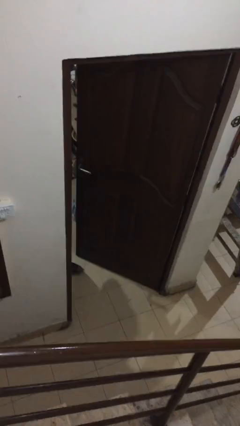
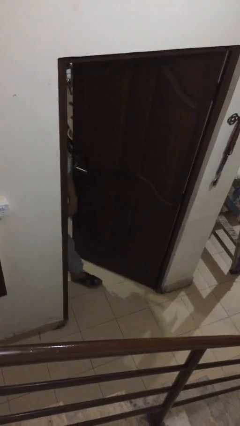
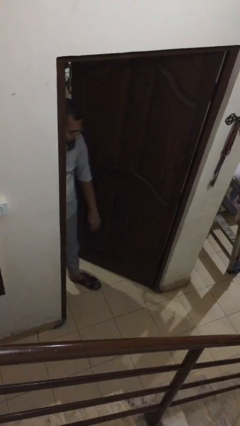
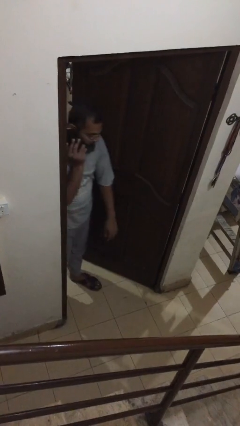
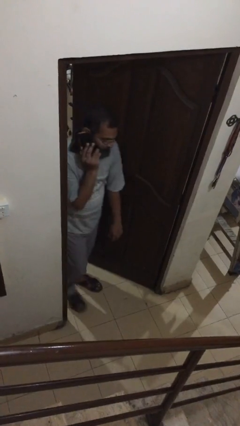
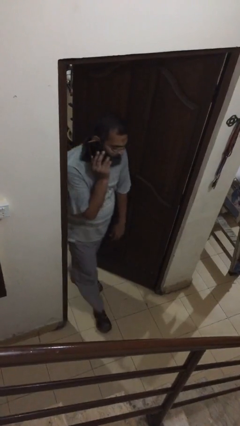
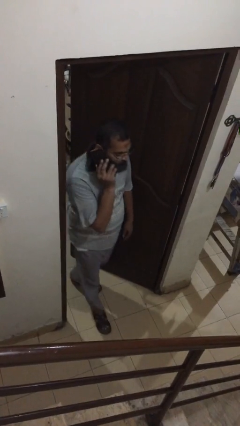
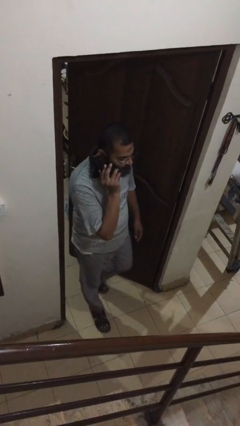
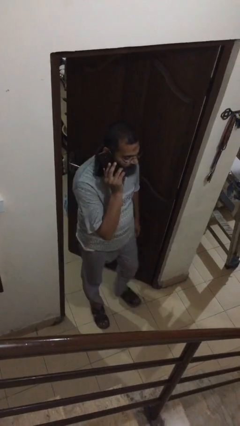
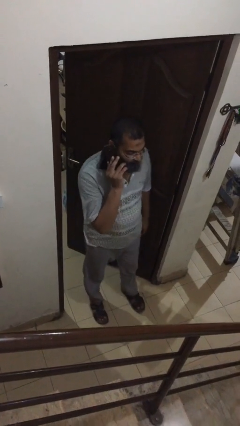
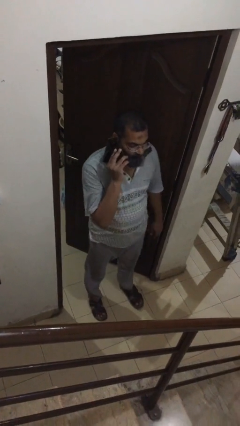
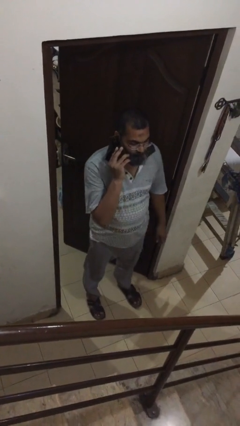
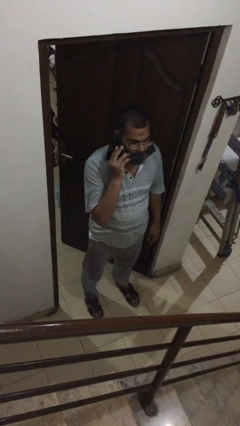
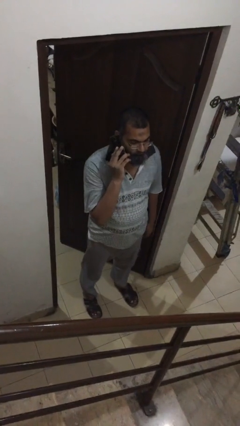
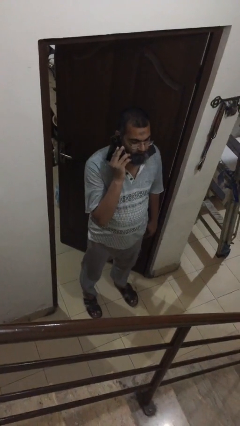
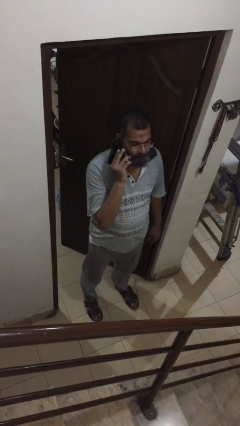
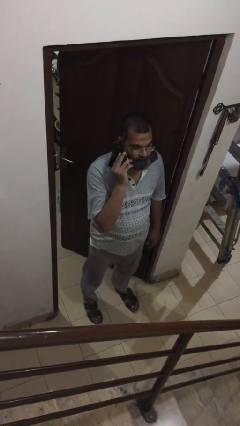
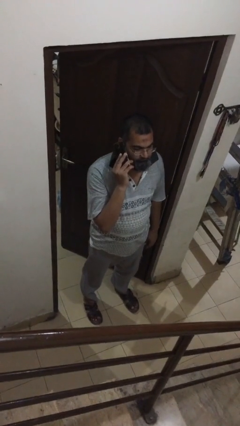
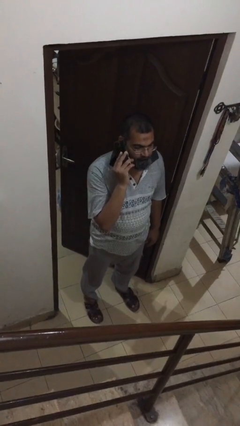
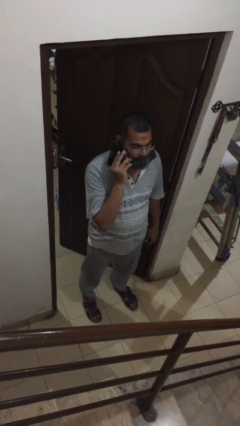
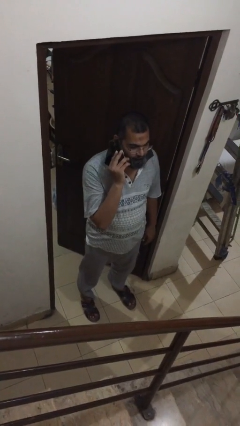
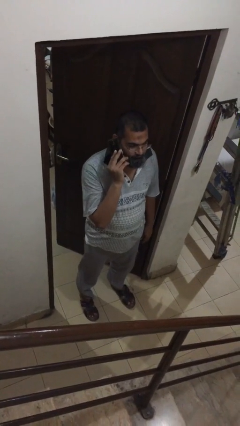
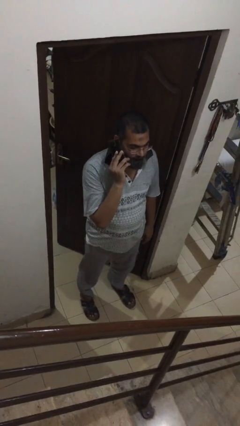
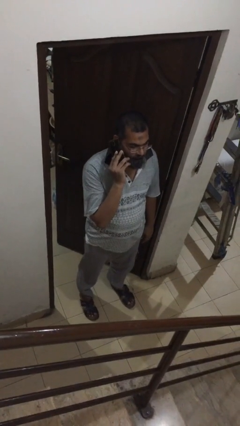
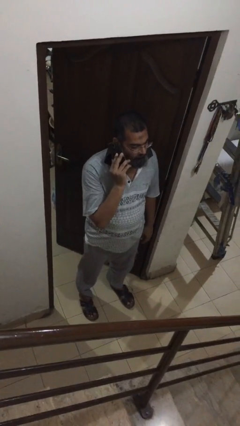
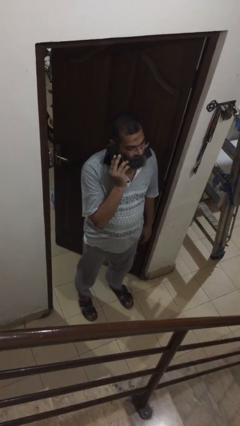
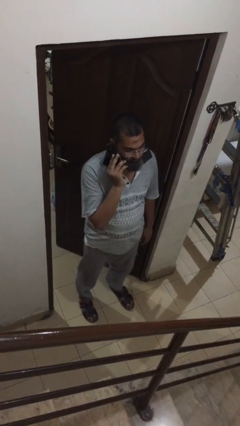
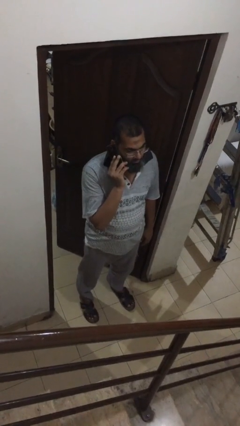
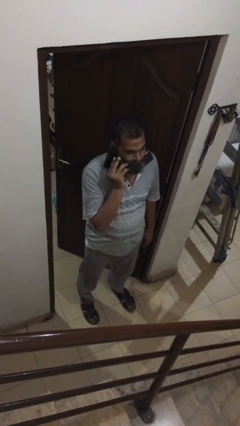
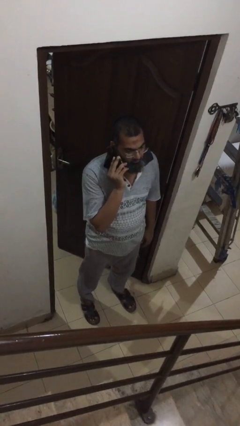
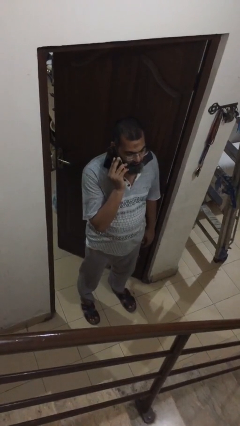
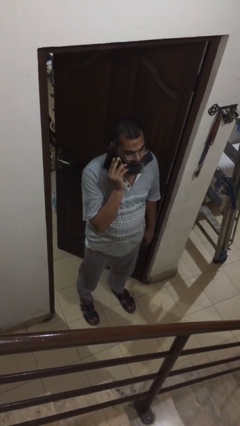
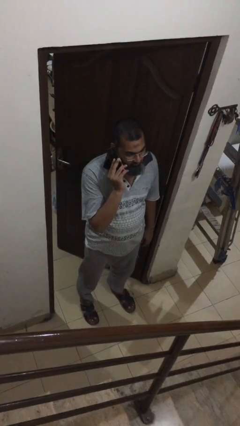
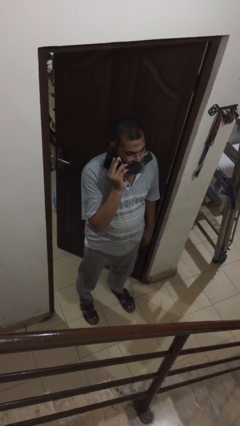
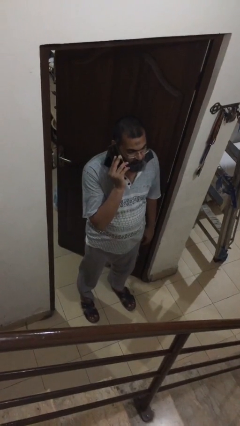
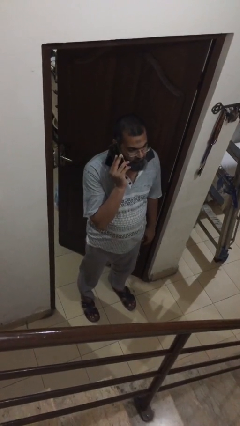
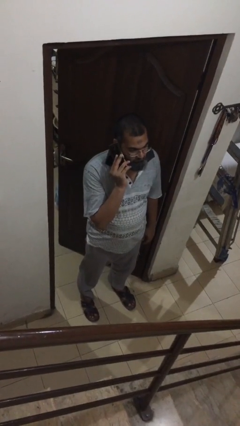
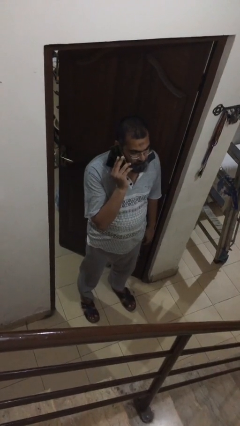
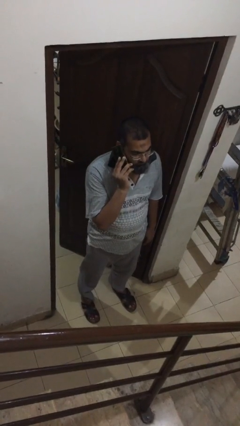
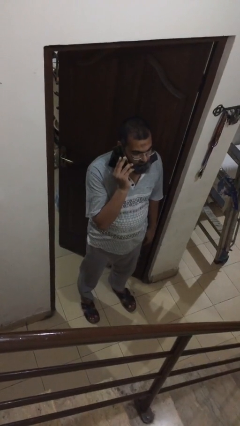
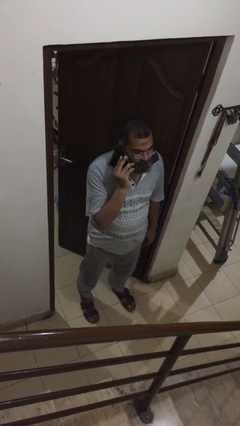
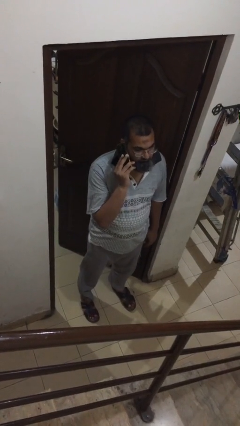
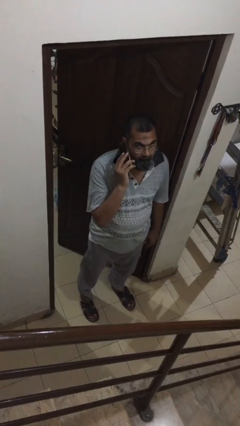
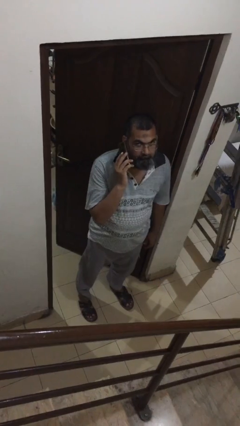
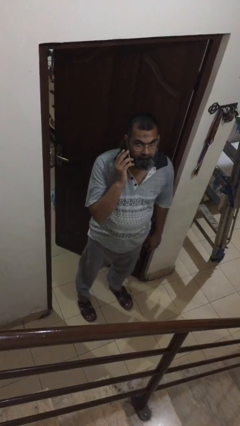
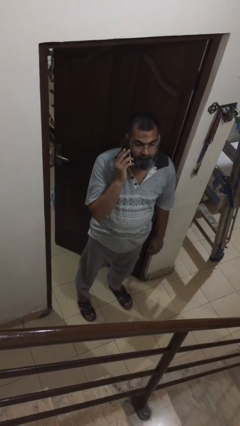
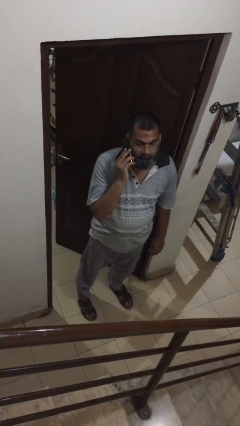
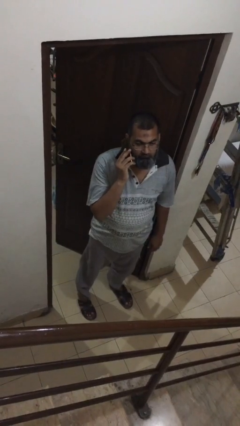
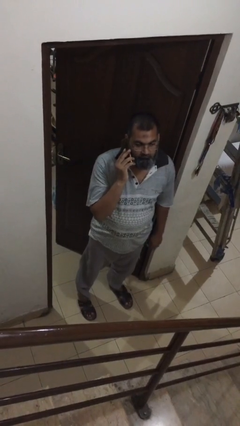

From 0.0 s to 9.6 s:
person enters scene through structure

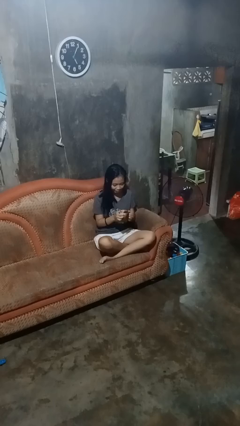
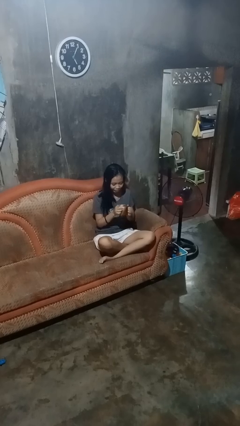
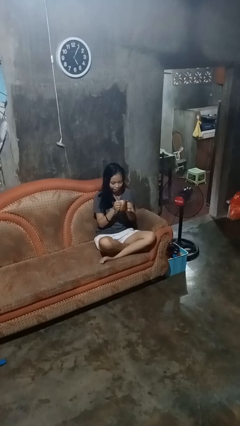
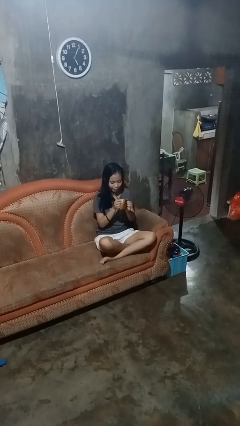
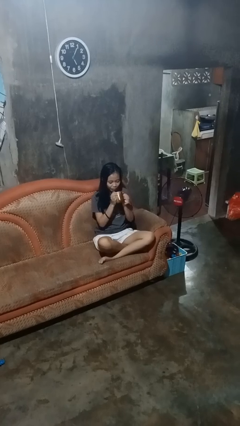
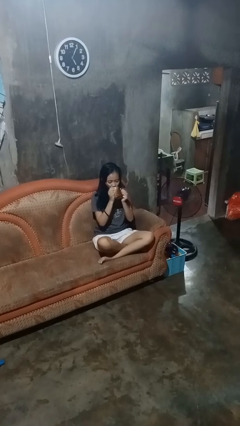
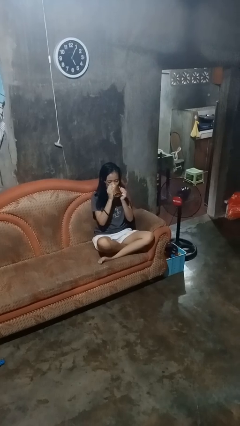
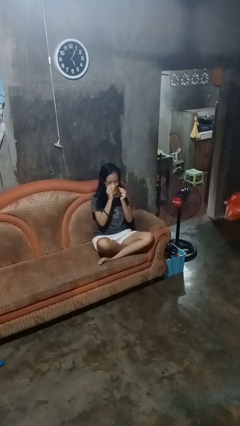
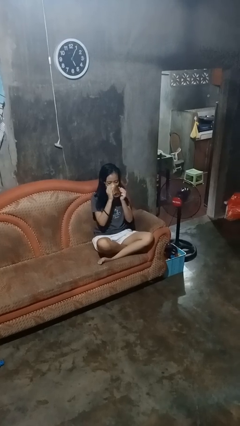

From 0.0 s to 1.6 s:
person drinks from mug

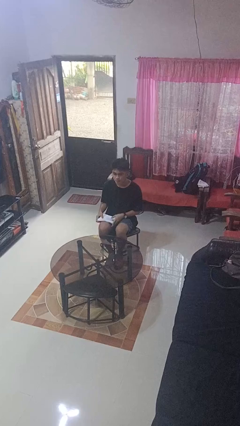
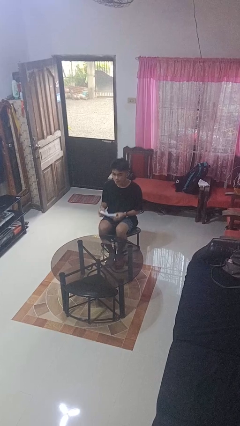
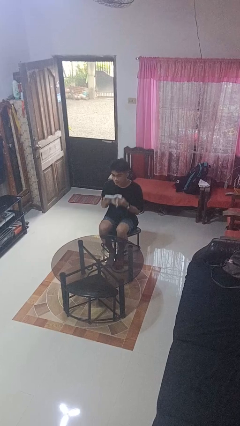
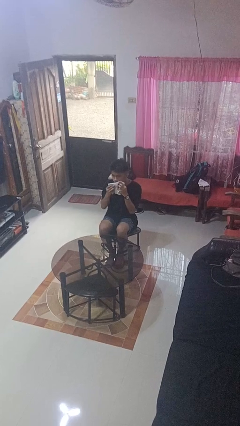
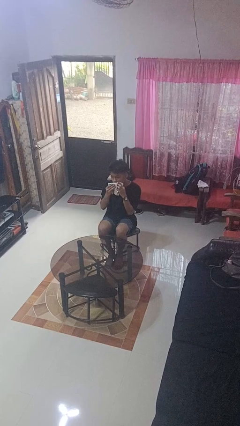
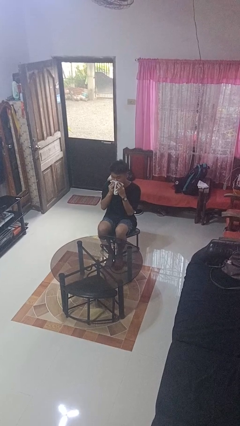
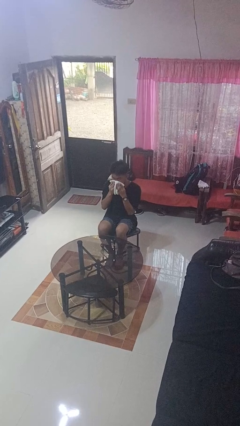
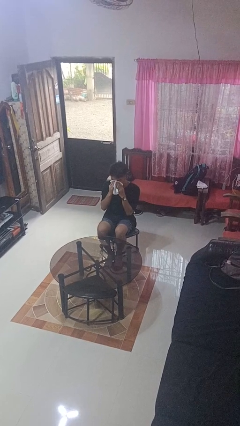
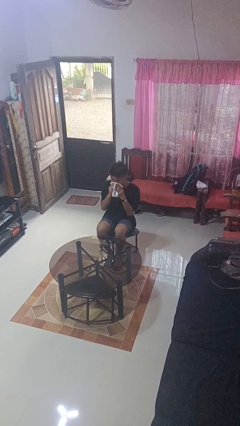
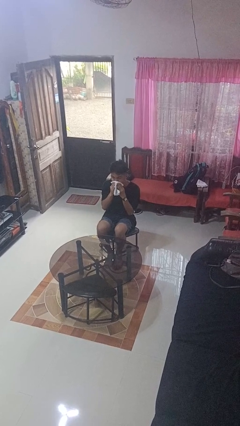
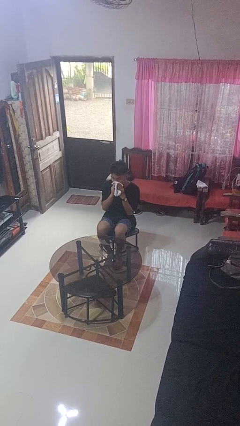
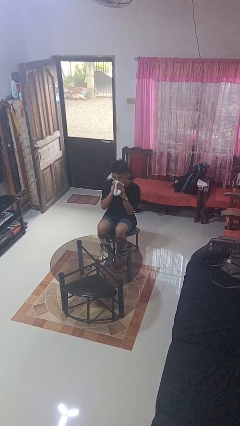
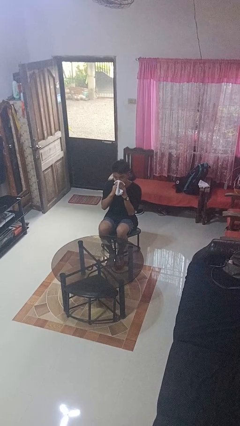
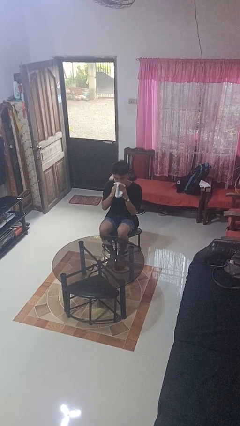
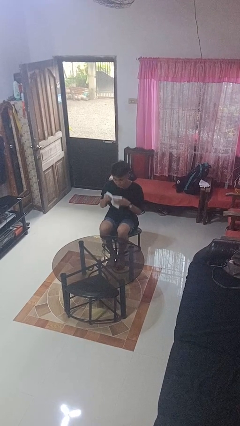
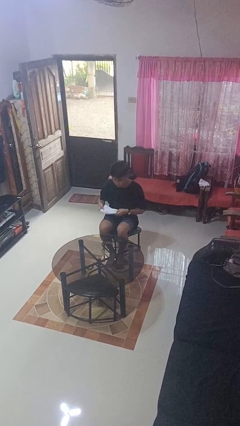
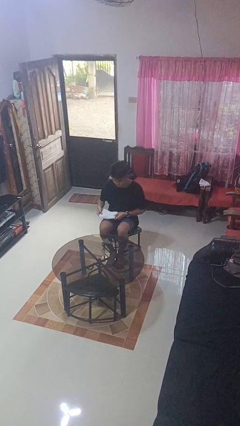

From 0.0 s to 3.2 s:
person wipes mouth with napkin

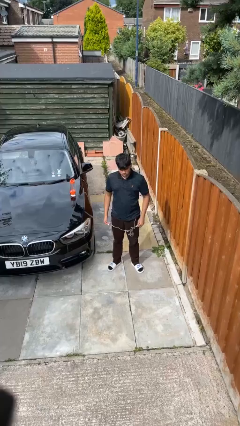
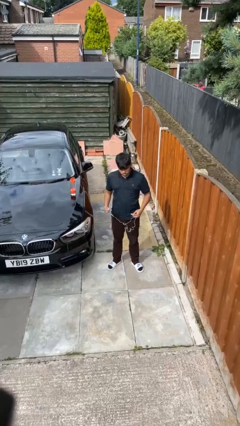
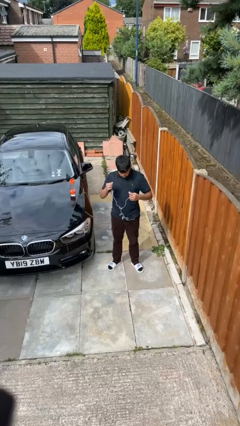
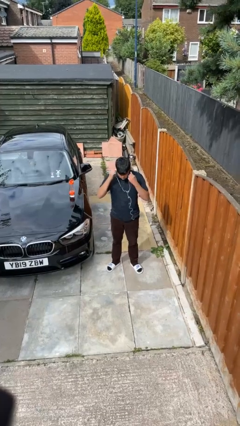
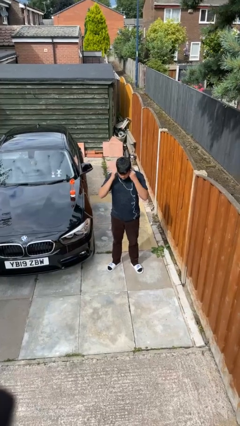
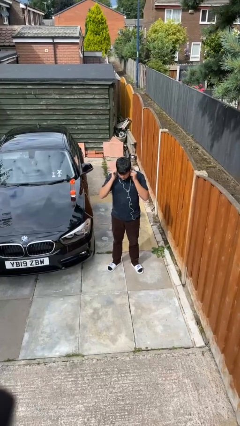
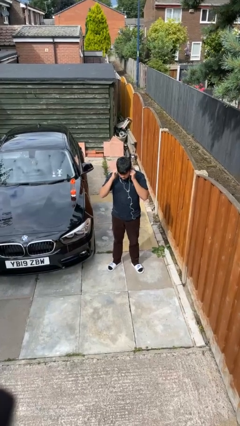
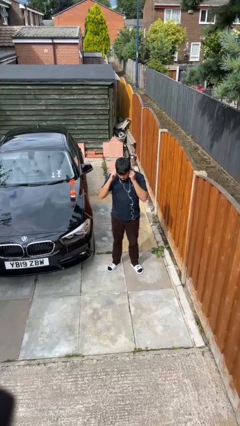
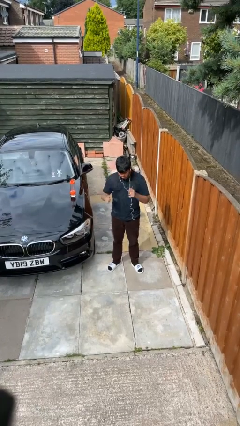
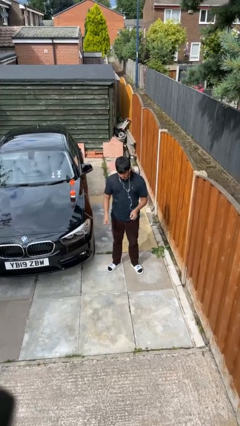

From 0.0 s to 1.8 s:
person puts on headphones

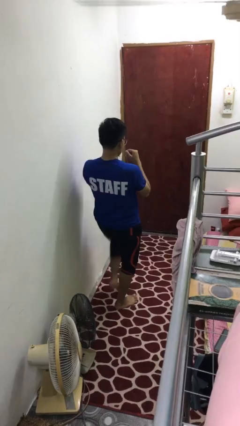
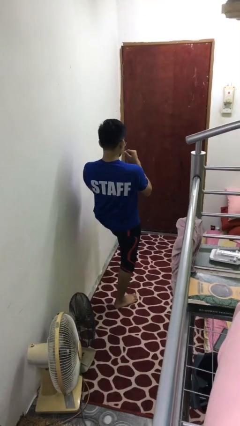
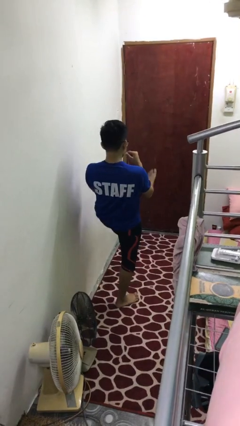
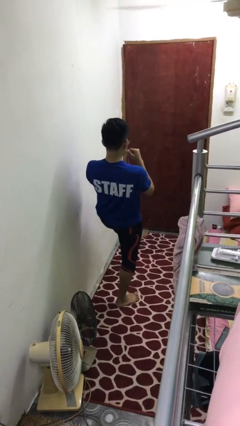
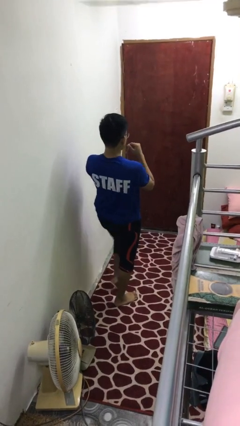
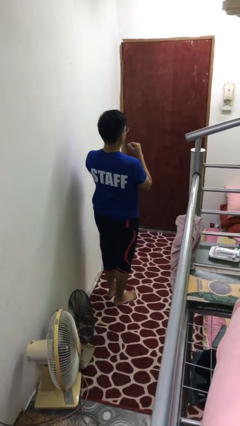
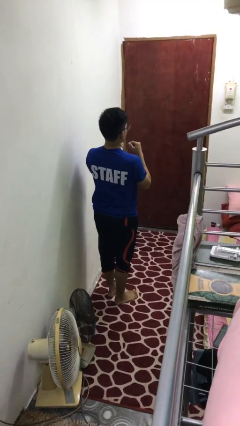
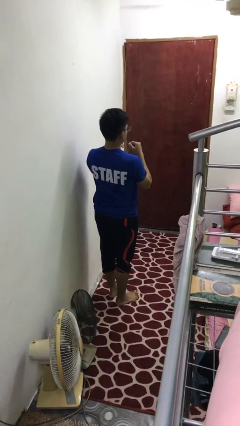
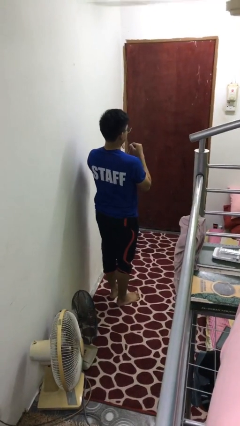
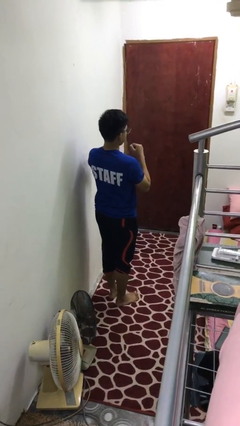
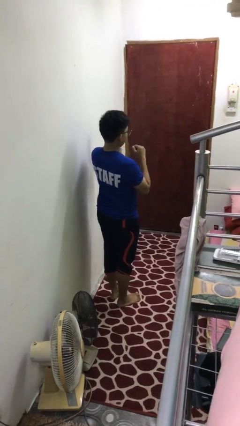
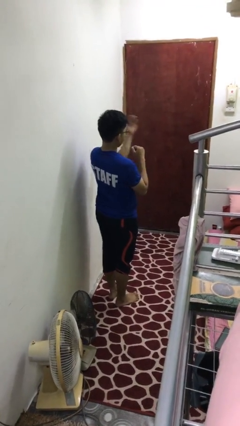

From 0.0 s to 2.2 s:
person karate kicks
